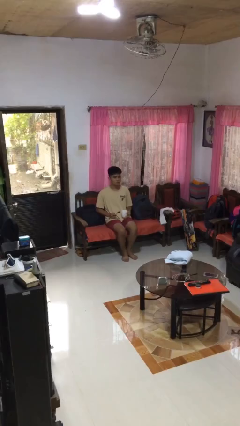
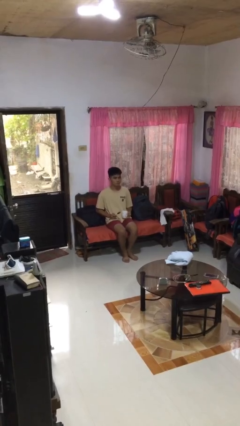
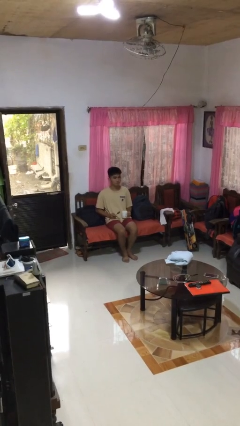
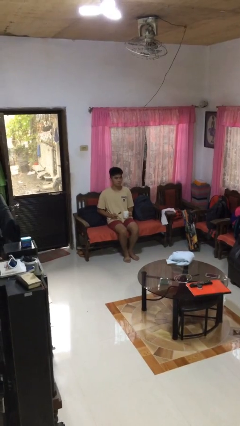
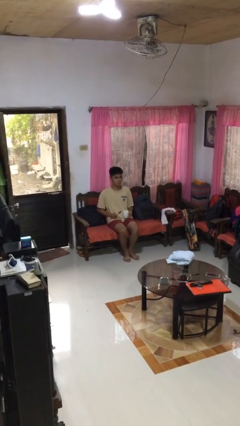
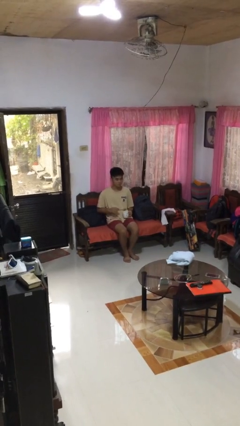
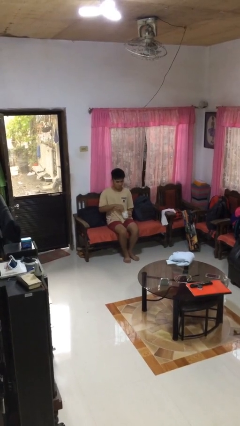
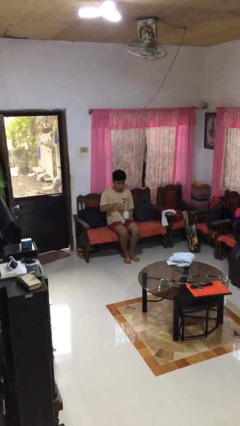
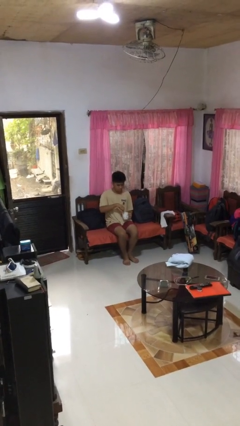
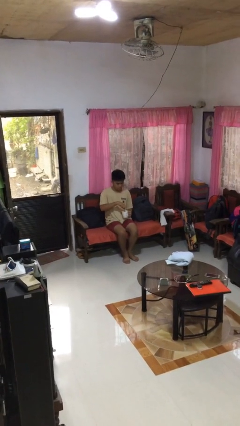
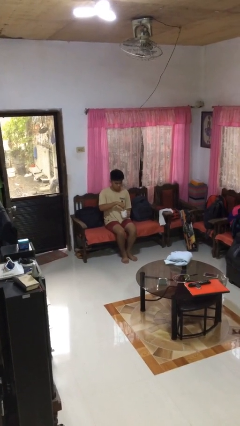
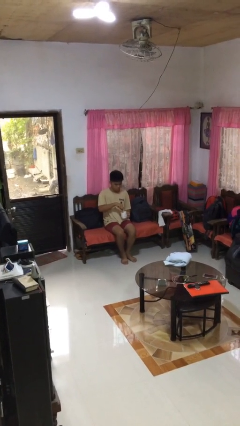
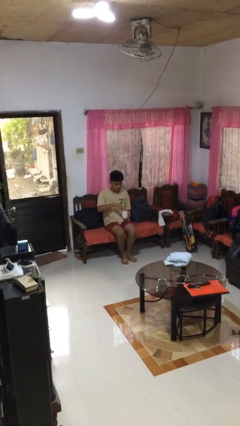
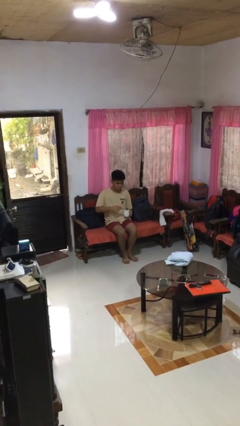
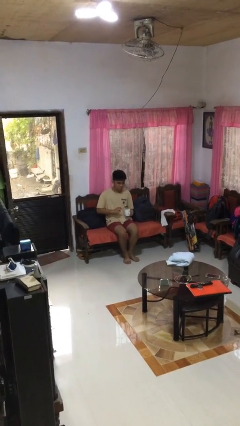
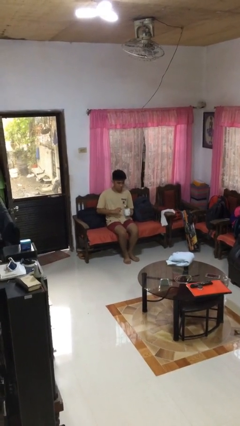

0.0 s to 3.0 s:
person stirs mug

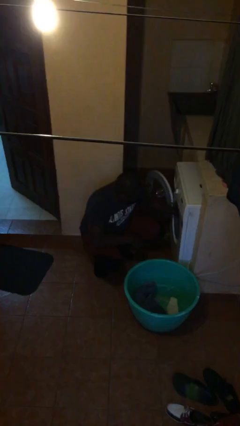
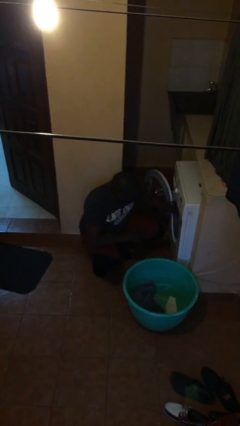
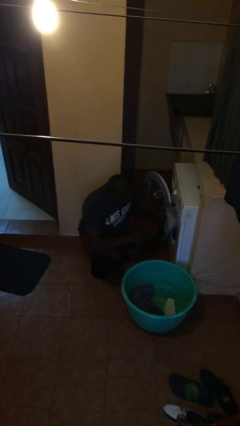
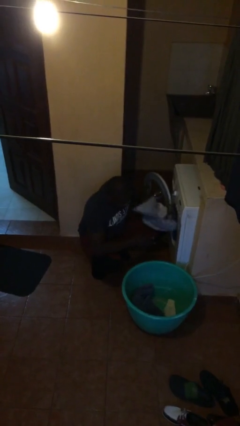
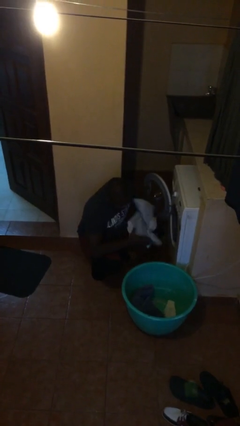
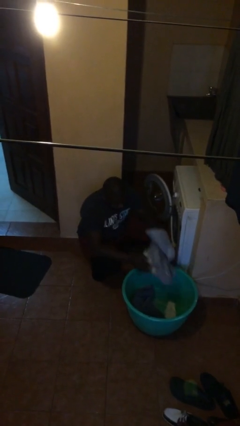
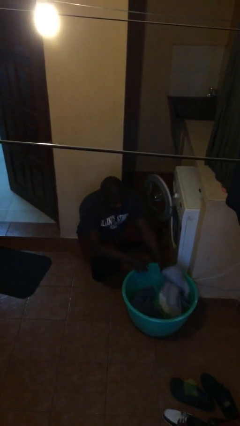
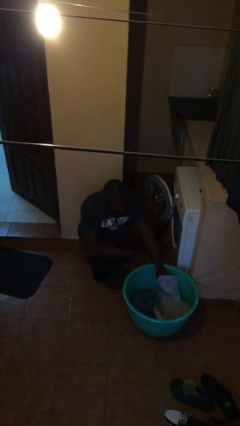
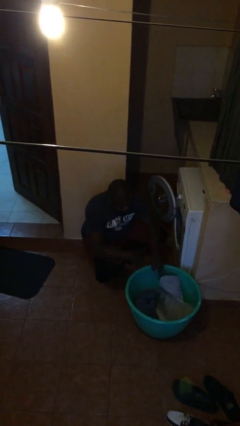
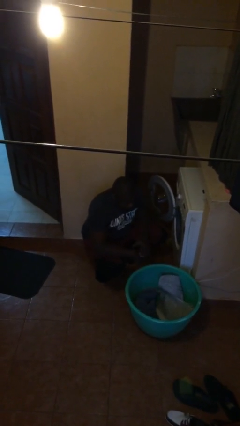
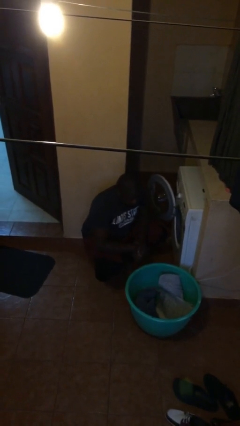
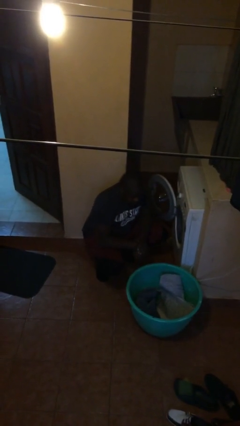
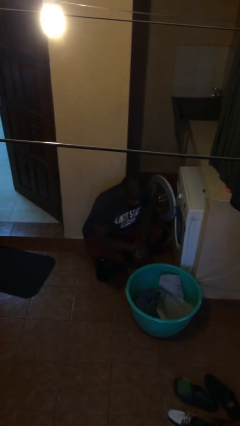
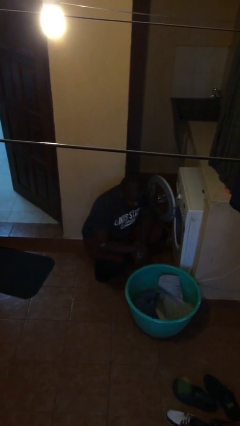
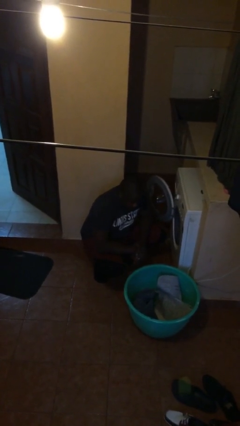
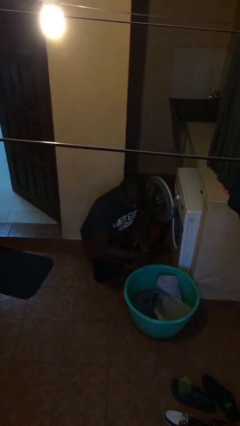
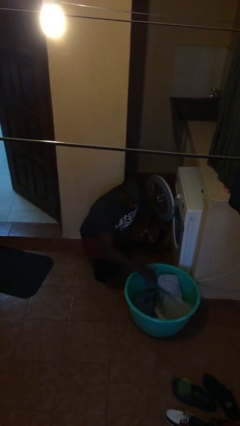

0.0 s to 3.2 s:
person unloads clotheswasher

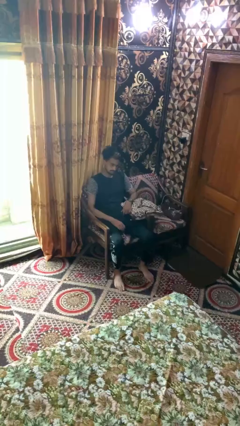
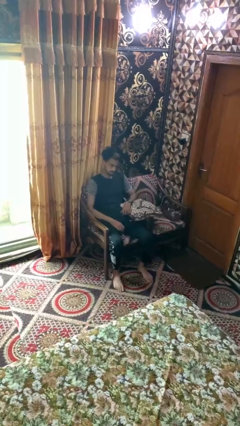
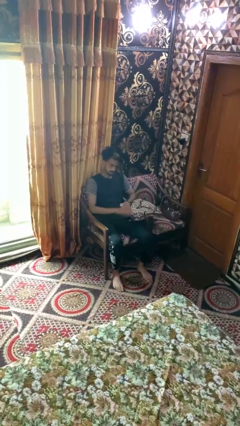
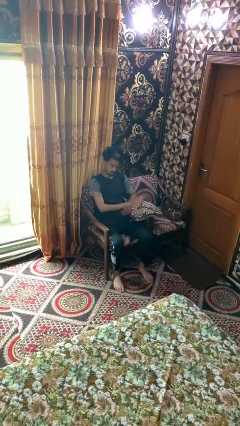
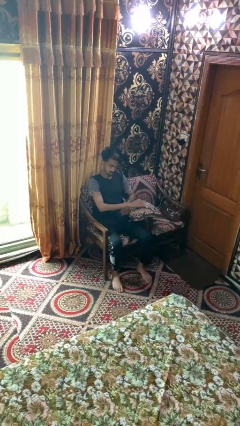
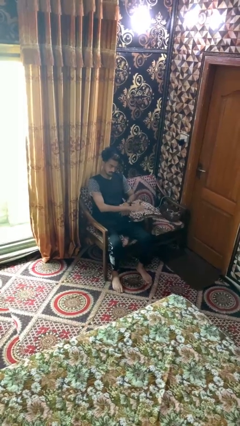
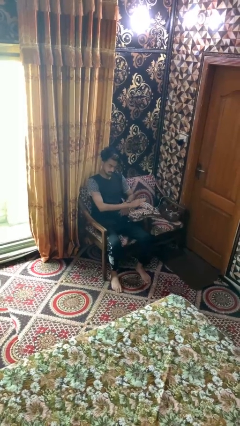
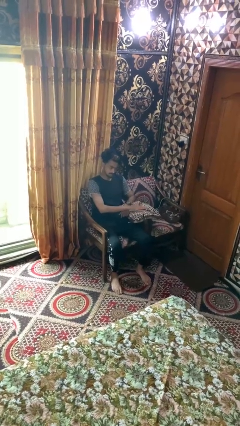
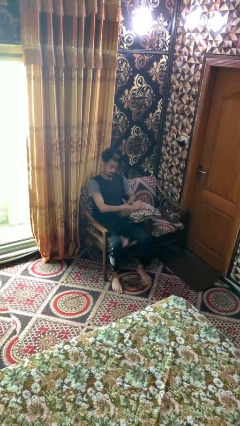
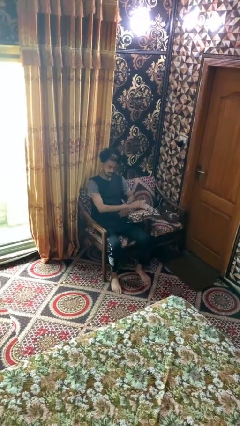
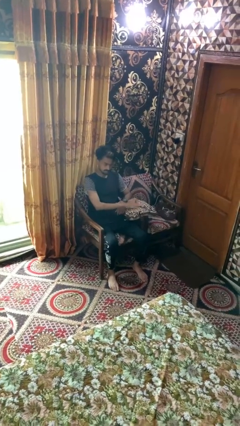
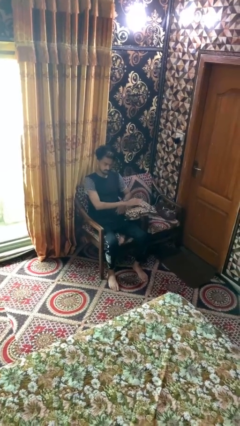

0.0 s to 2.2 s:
person taps object with finger

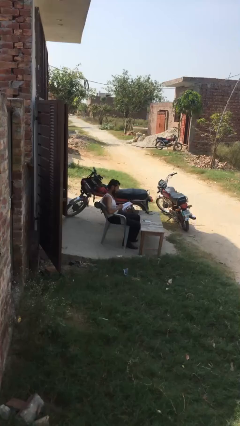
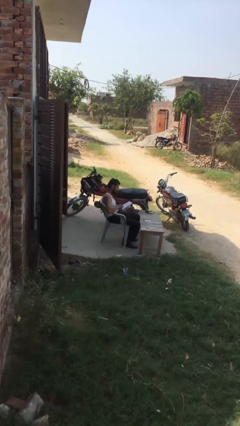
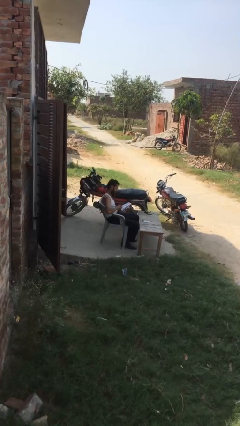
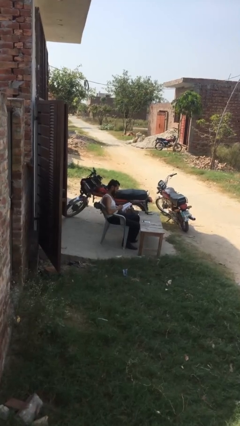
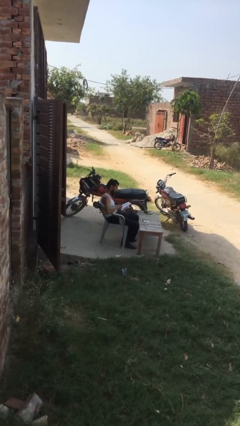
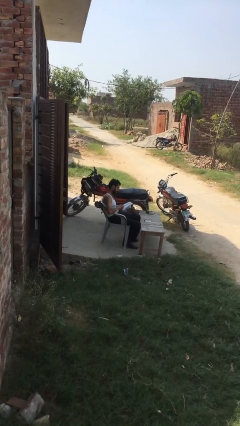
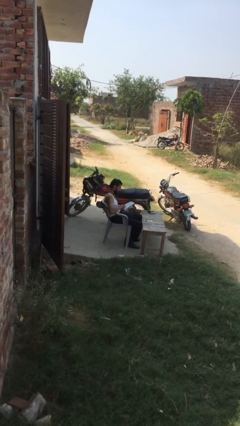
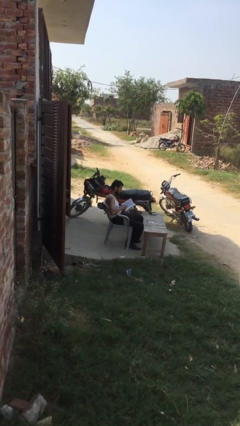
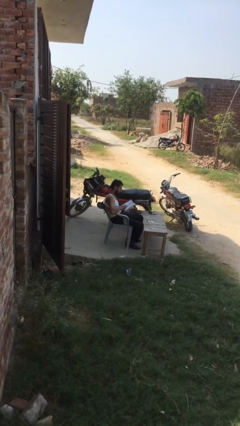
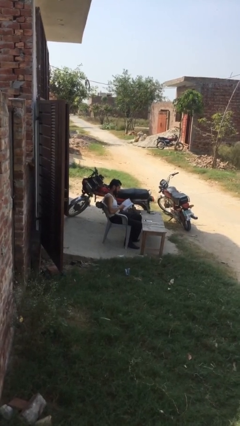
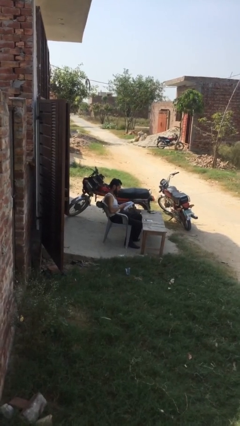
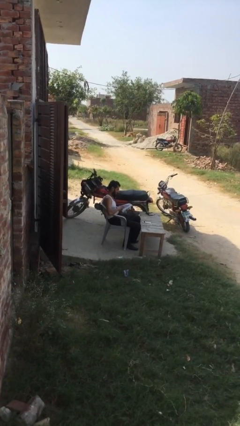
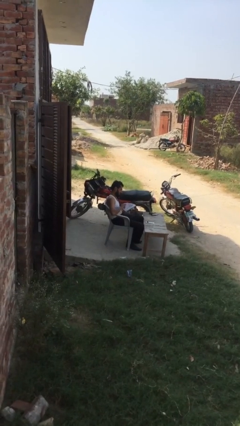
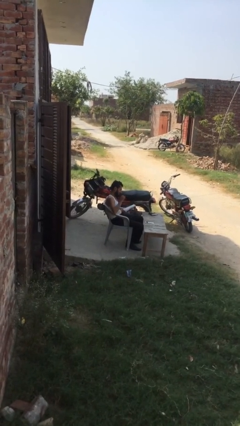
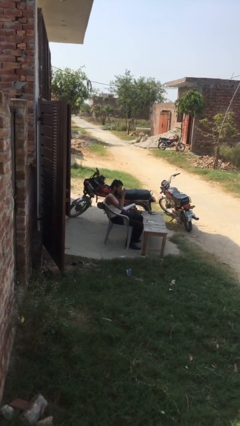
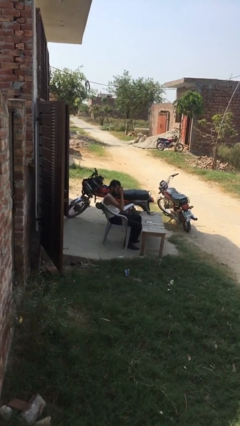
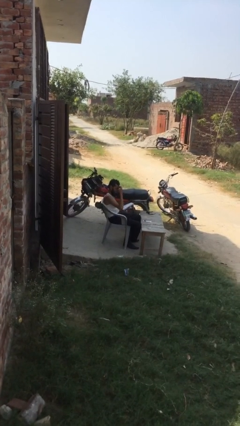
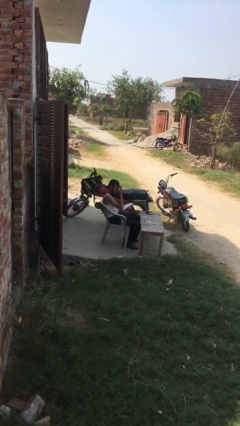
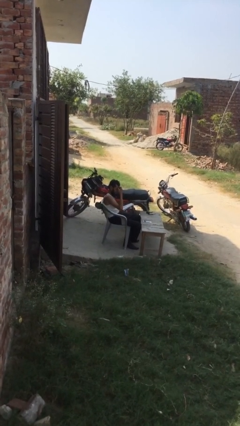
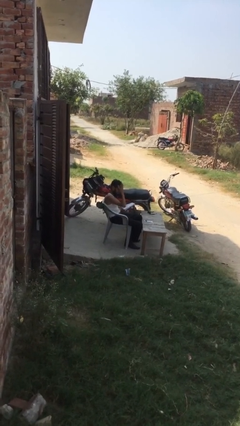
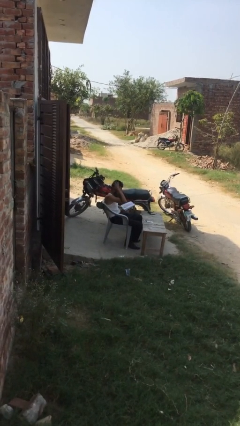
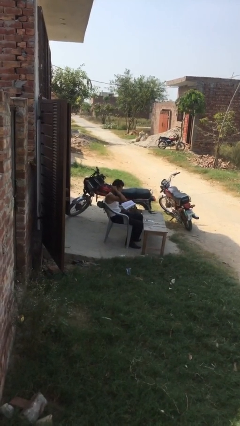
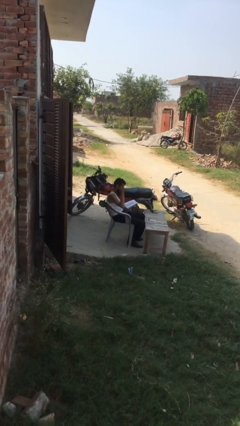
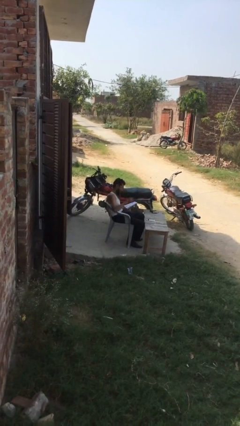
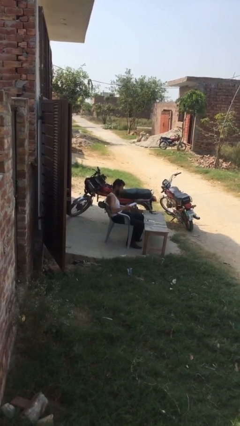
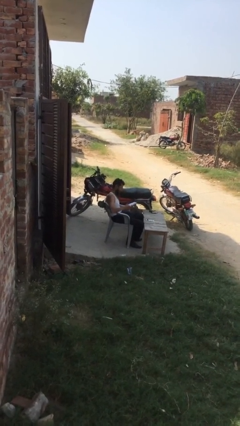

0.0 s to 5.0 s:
person reads document

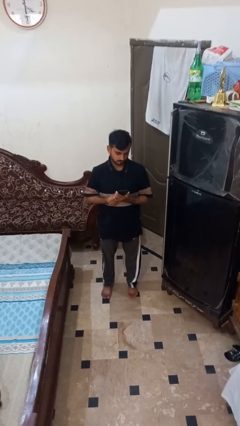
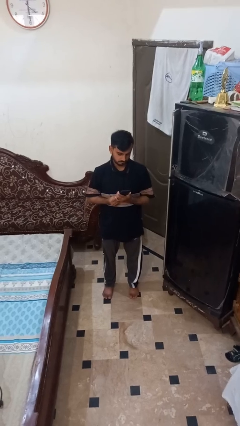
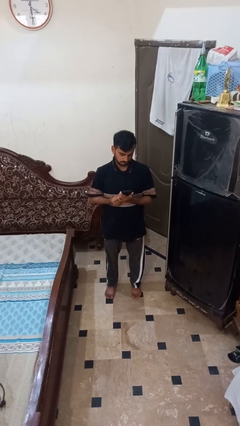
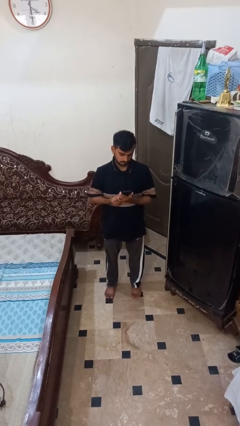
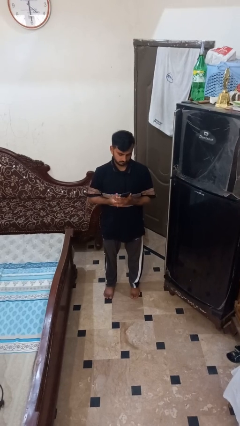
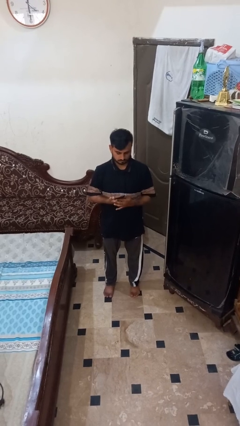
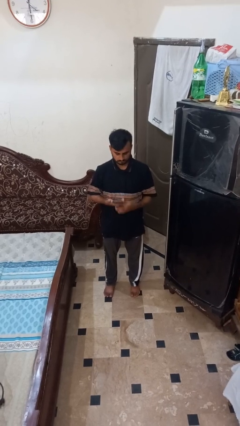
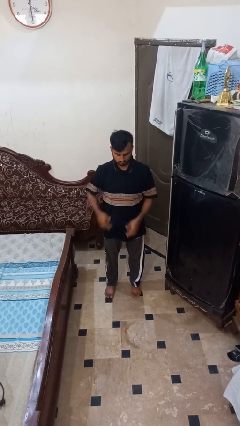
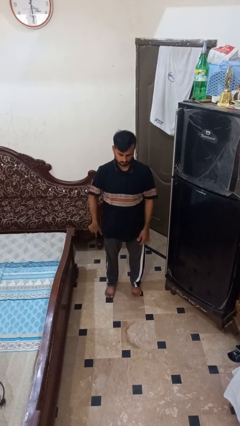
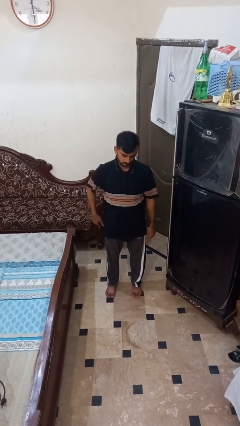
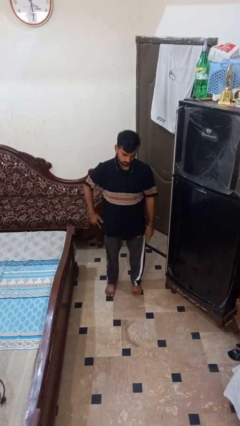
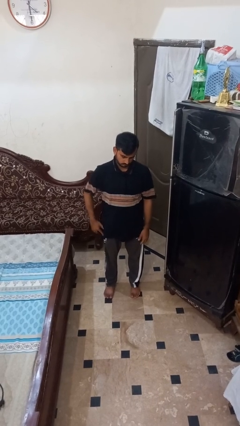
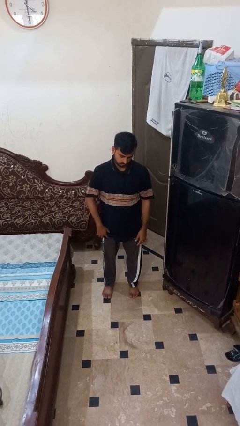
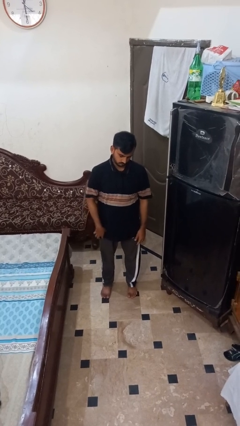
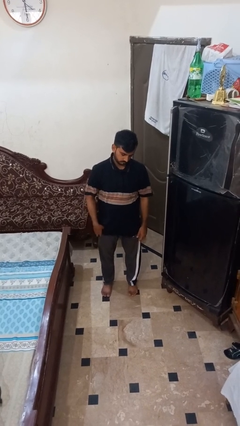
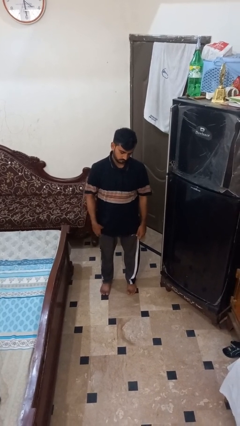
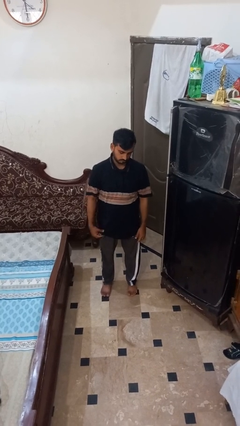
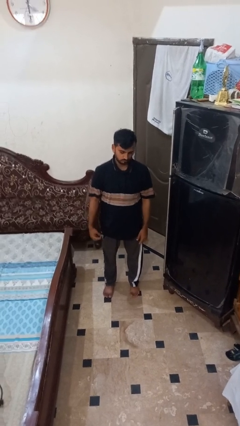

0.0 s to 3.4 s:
person puts phone into pocket

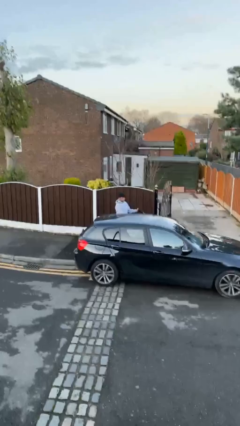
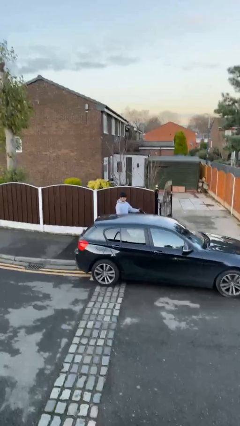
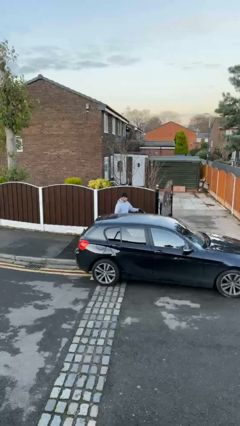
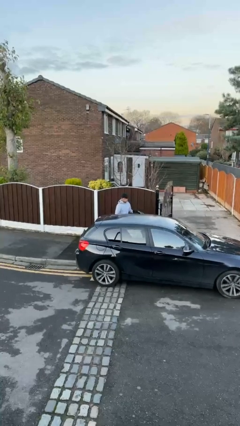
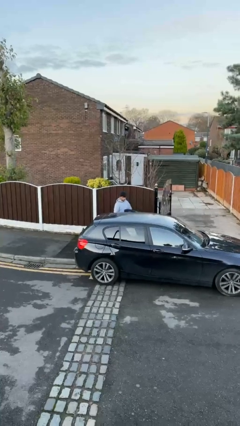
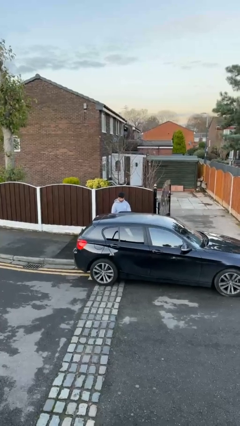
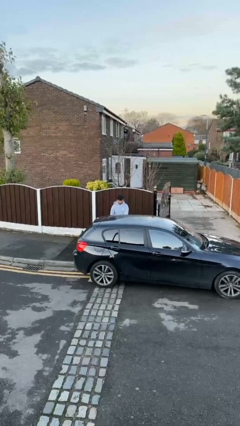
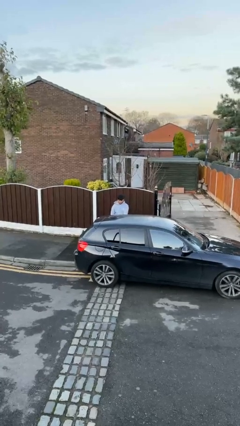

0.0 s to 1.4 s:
person closes car door
